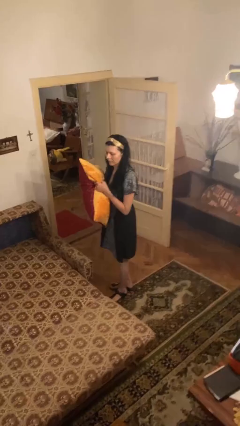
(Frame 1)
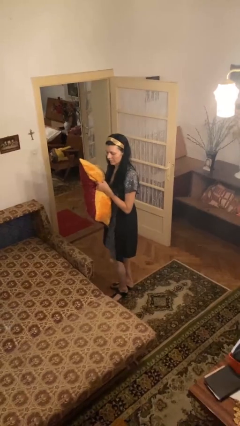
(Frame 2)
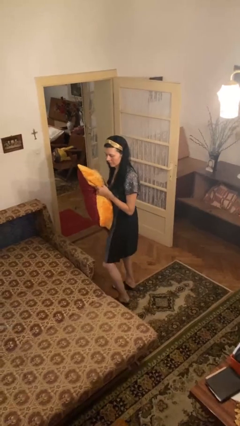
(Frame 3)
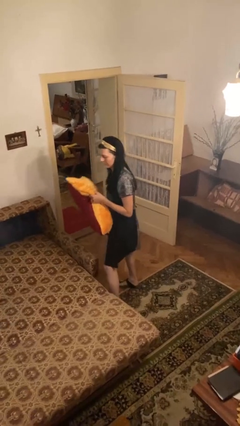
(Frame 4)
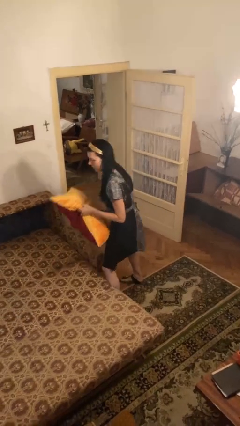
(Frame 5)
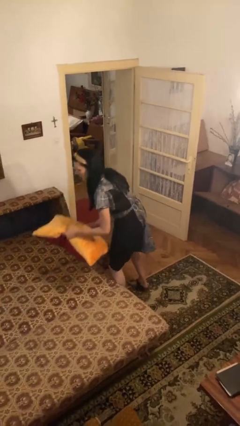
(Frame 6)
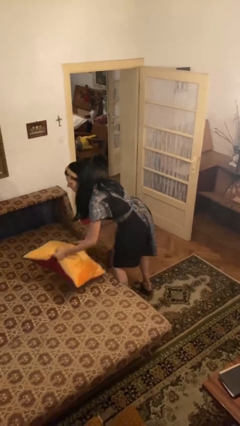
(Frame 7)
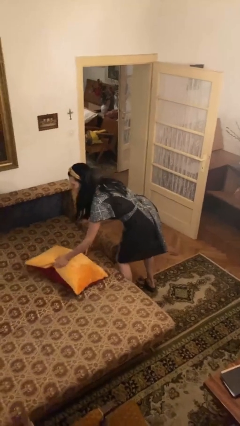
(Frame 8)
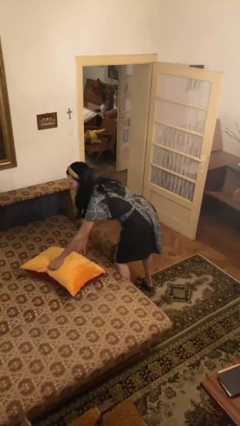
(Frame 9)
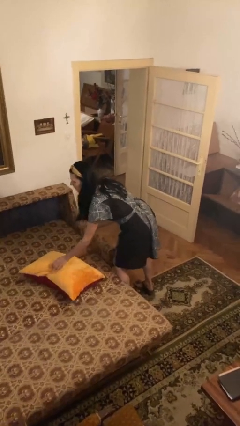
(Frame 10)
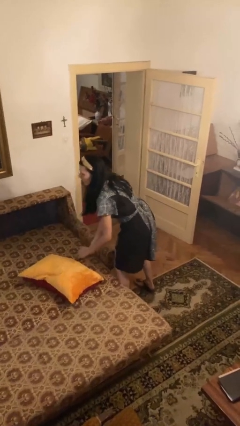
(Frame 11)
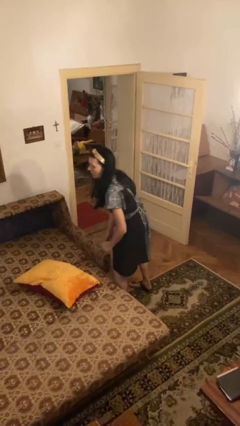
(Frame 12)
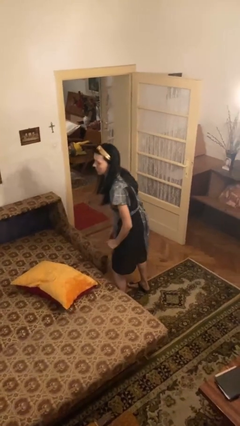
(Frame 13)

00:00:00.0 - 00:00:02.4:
person puts down object on bed

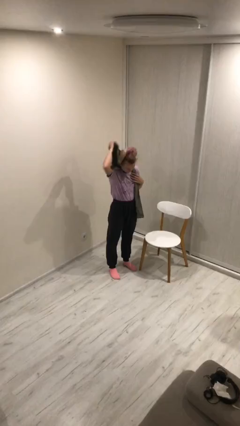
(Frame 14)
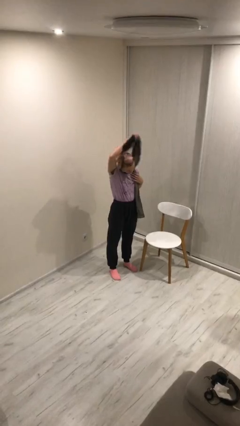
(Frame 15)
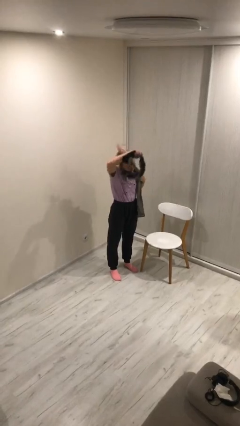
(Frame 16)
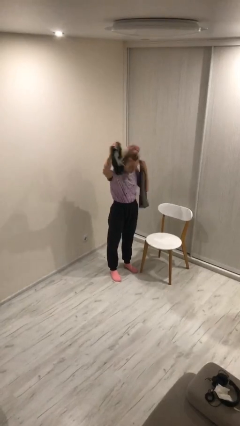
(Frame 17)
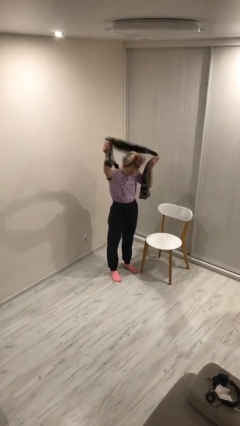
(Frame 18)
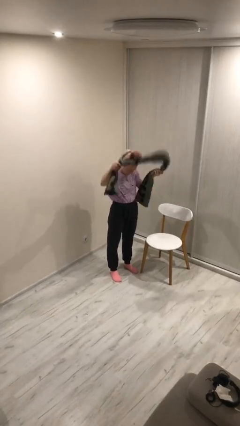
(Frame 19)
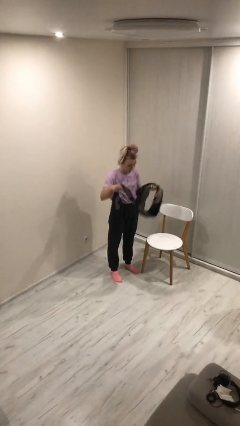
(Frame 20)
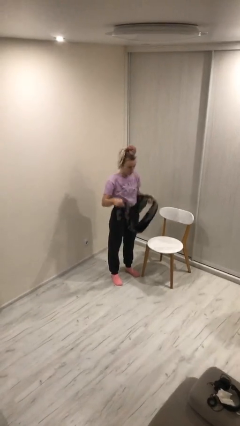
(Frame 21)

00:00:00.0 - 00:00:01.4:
person takes off scarf

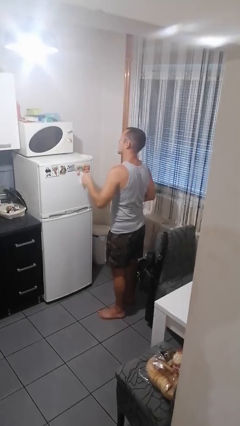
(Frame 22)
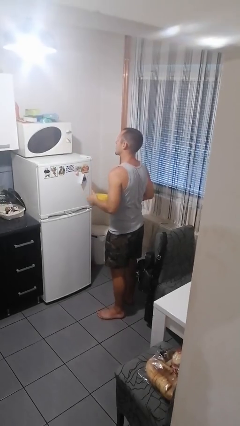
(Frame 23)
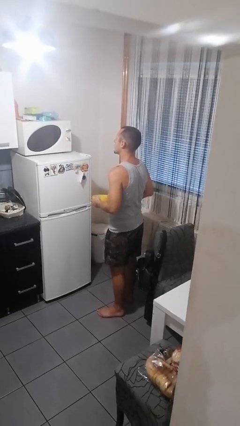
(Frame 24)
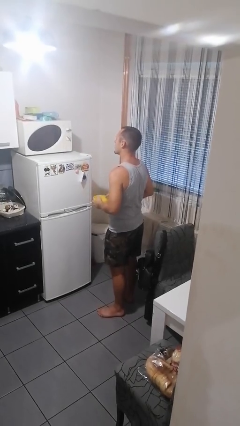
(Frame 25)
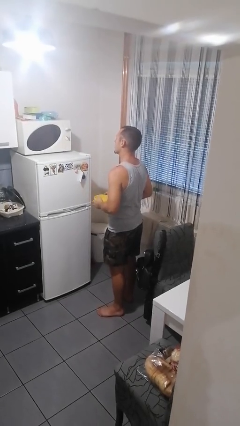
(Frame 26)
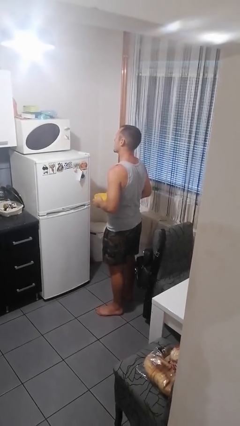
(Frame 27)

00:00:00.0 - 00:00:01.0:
person takes object from microwave

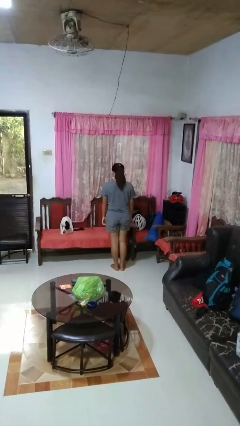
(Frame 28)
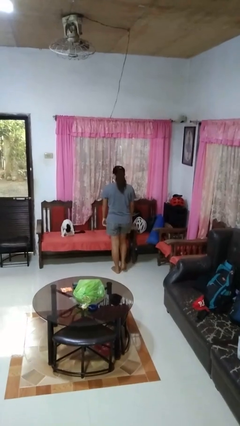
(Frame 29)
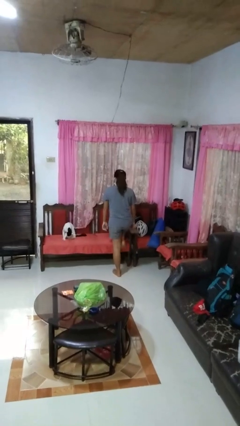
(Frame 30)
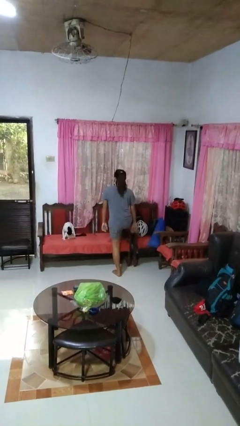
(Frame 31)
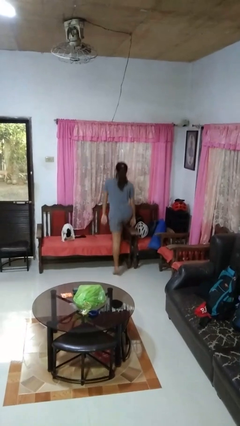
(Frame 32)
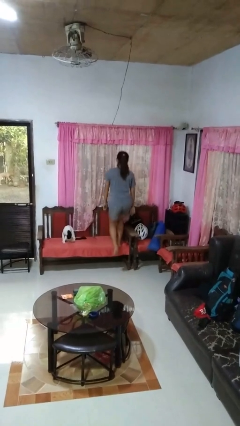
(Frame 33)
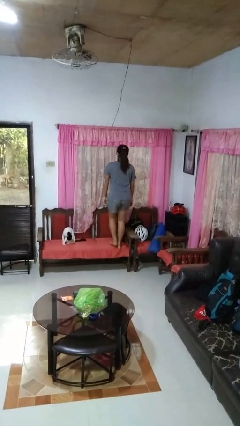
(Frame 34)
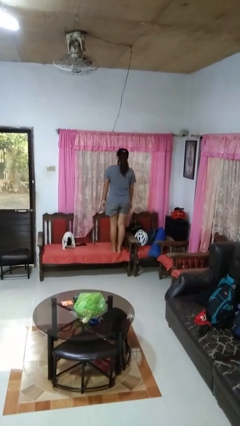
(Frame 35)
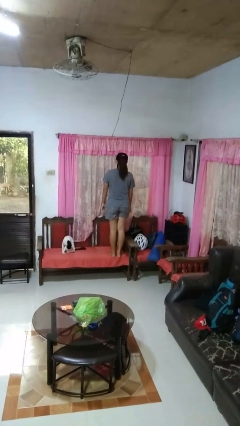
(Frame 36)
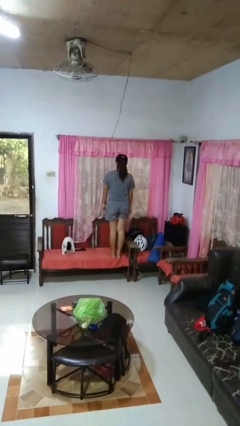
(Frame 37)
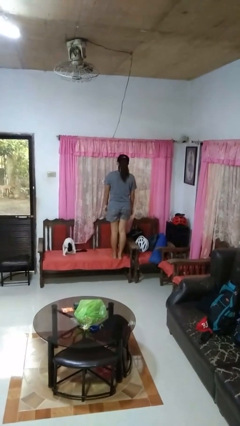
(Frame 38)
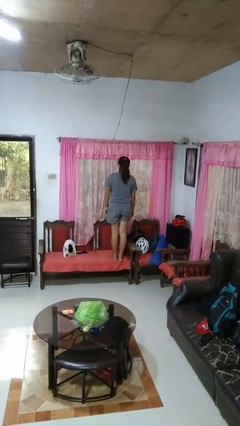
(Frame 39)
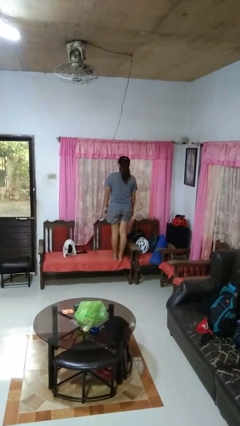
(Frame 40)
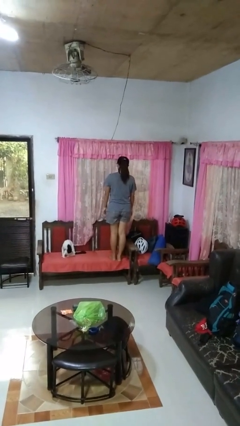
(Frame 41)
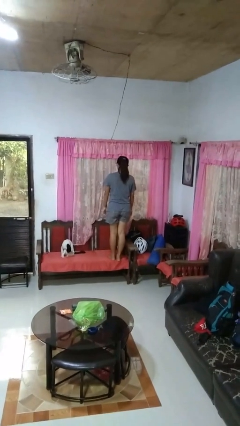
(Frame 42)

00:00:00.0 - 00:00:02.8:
person climbs on chair

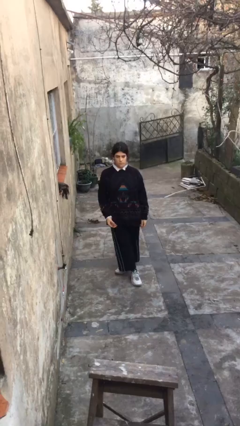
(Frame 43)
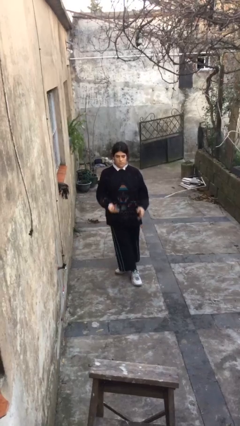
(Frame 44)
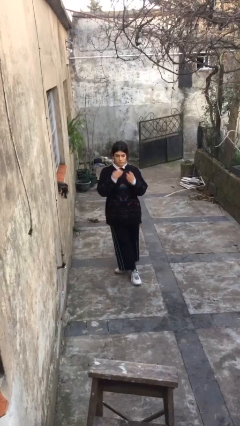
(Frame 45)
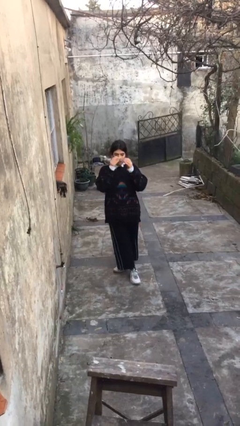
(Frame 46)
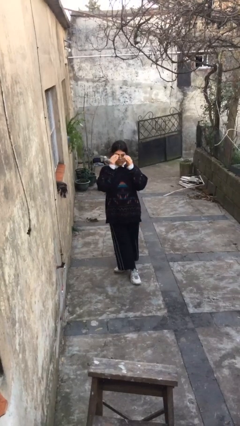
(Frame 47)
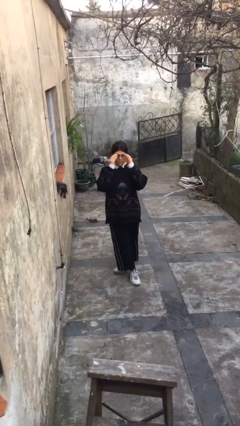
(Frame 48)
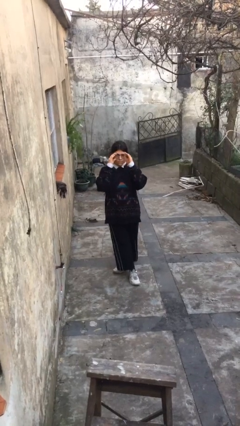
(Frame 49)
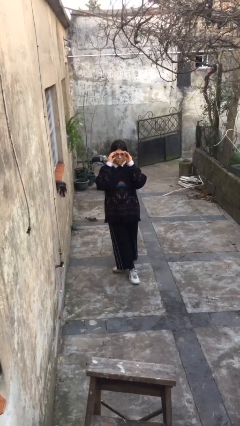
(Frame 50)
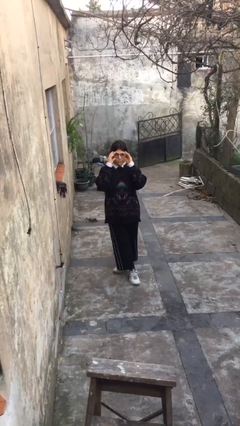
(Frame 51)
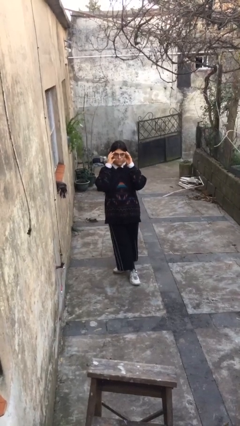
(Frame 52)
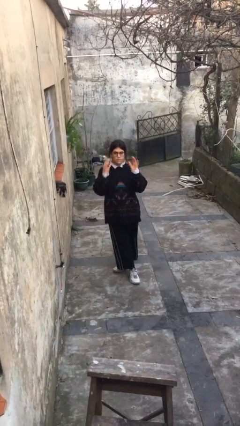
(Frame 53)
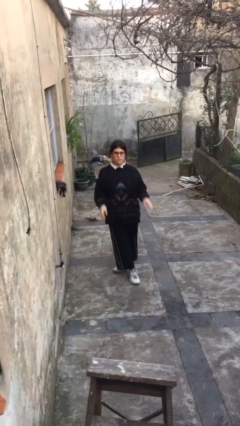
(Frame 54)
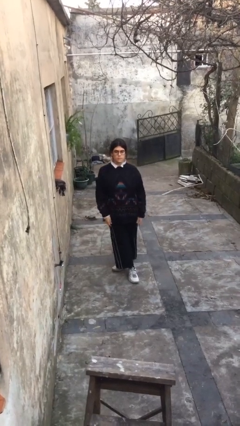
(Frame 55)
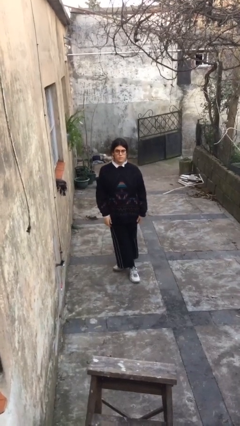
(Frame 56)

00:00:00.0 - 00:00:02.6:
person puts on glasses

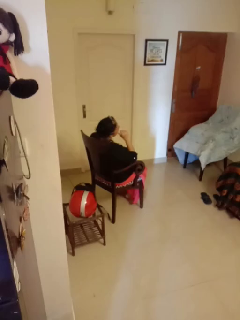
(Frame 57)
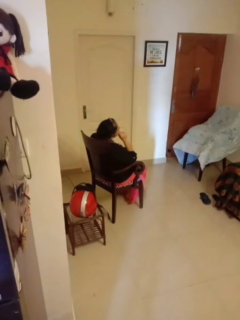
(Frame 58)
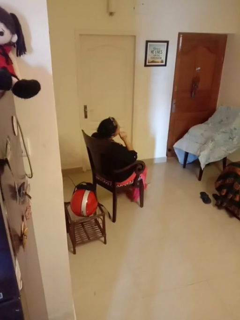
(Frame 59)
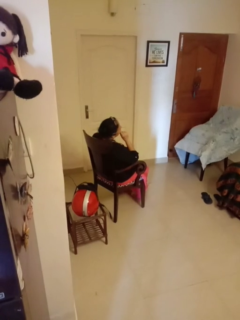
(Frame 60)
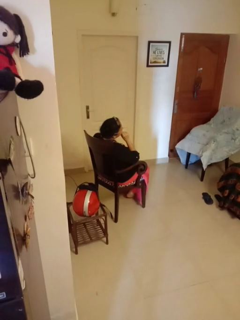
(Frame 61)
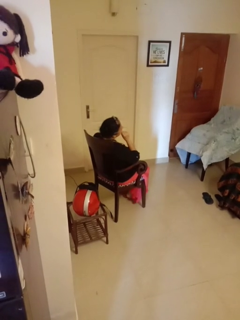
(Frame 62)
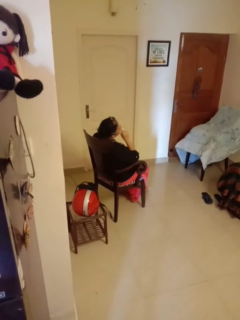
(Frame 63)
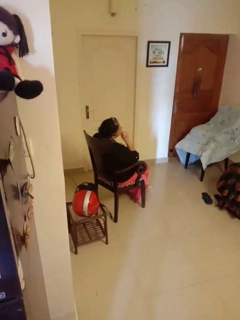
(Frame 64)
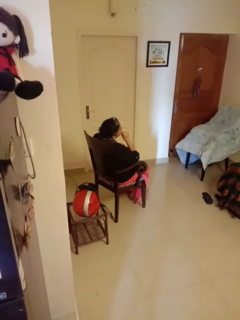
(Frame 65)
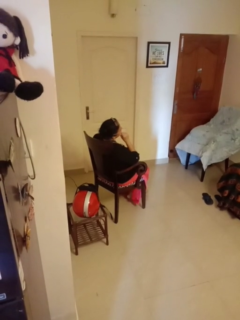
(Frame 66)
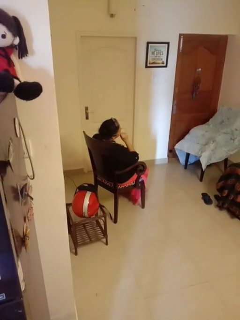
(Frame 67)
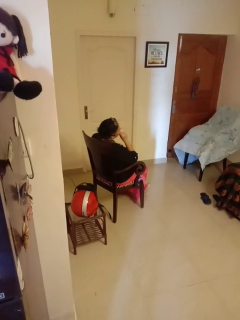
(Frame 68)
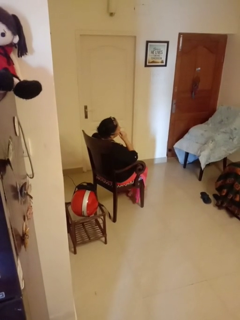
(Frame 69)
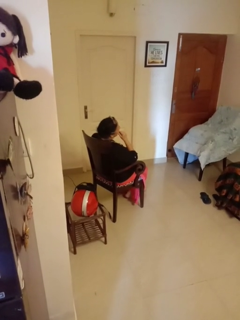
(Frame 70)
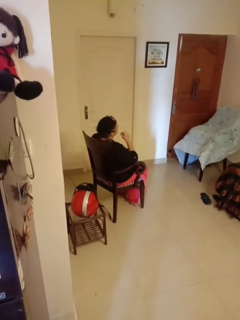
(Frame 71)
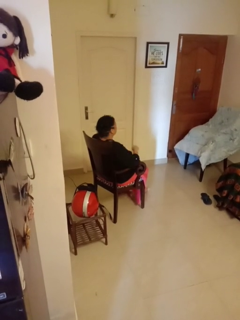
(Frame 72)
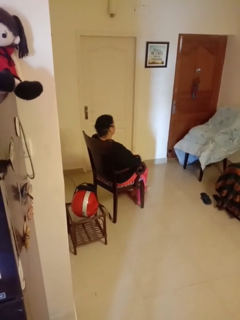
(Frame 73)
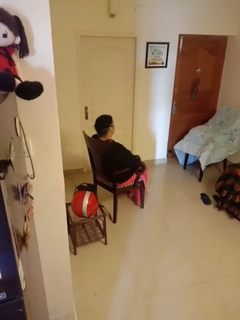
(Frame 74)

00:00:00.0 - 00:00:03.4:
person strokes chin

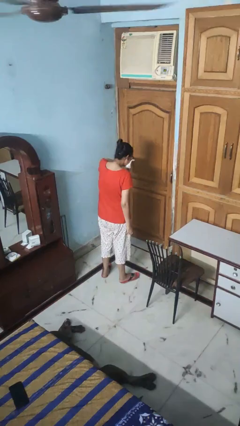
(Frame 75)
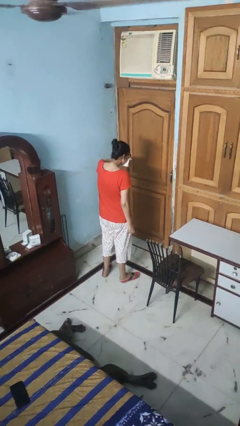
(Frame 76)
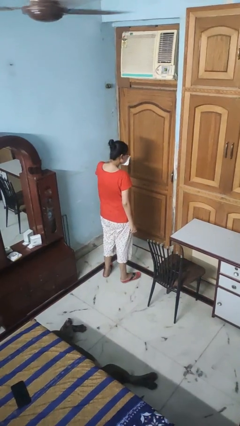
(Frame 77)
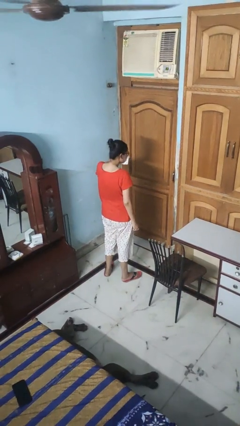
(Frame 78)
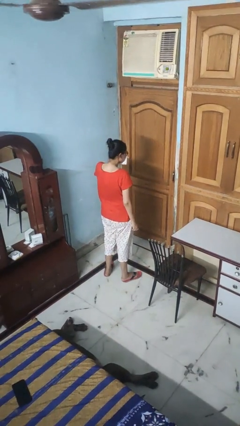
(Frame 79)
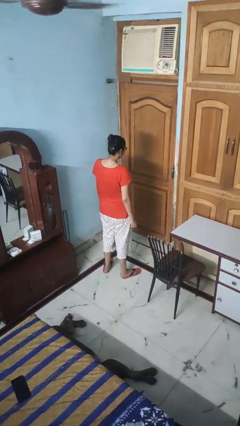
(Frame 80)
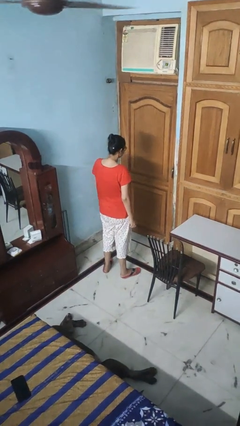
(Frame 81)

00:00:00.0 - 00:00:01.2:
person blows nose

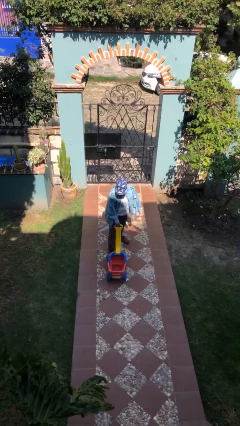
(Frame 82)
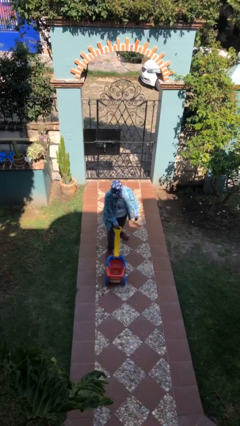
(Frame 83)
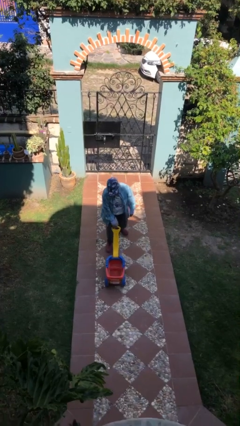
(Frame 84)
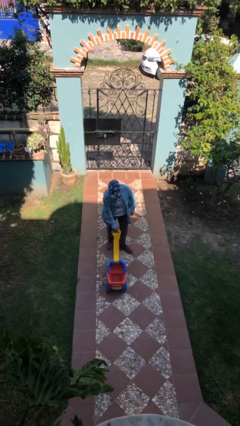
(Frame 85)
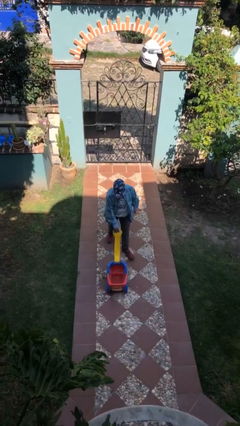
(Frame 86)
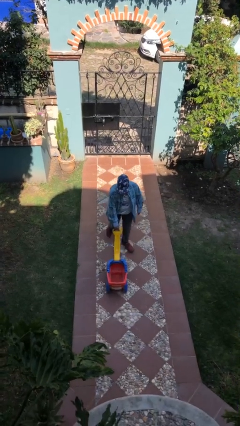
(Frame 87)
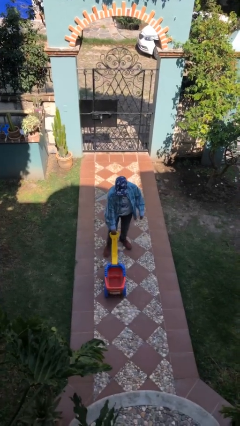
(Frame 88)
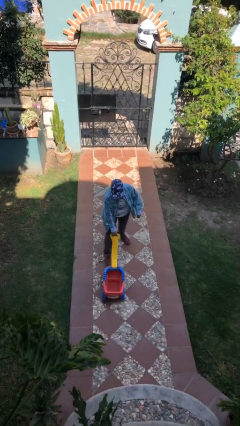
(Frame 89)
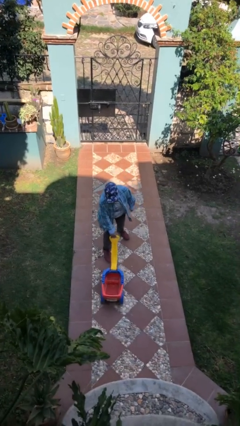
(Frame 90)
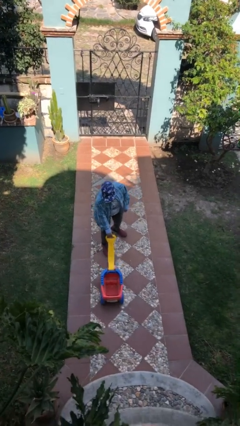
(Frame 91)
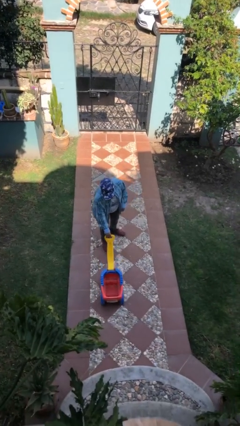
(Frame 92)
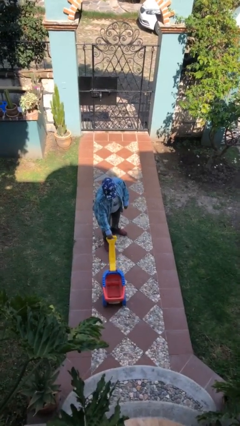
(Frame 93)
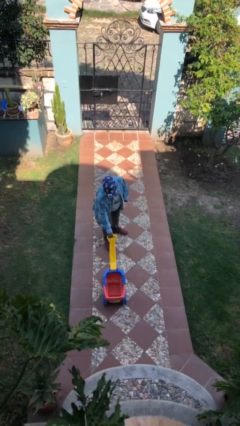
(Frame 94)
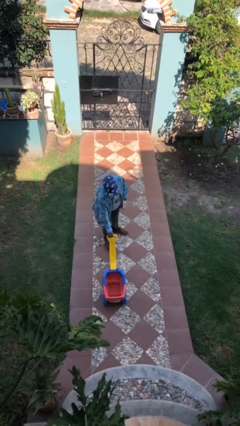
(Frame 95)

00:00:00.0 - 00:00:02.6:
person pushes wheeled cart
